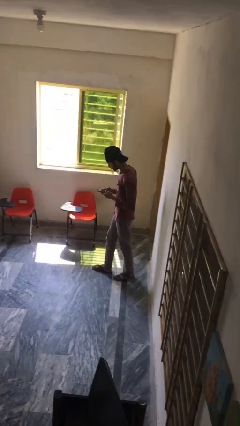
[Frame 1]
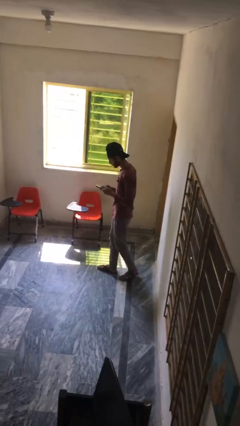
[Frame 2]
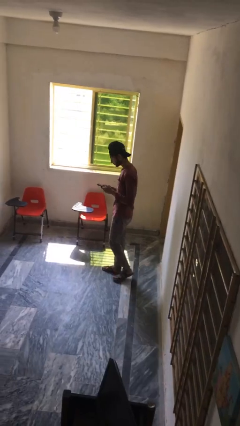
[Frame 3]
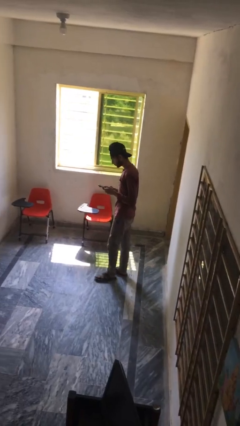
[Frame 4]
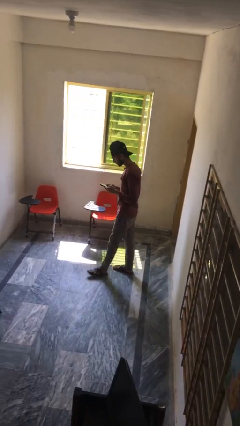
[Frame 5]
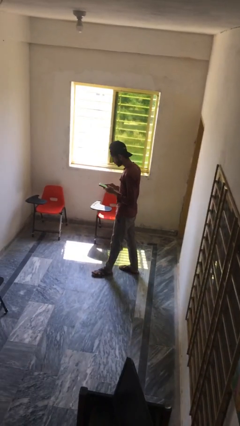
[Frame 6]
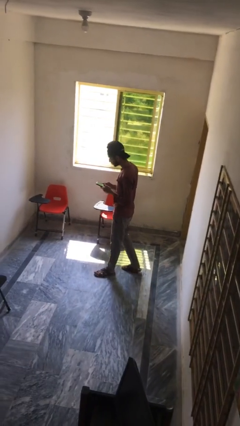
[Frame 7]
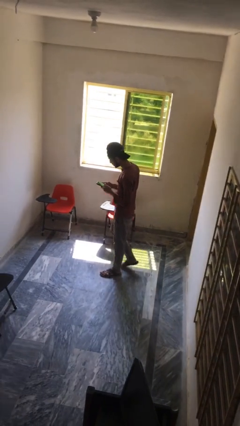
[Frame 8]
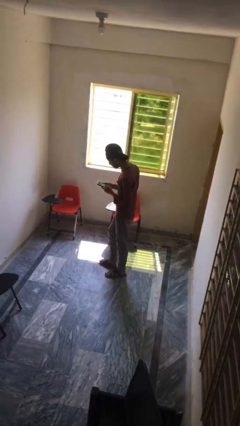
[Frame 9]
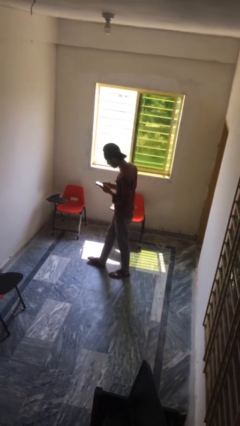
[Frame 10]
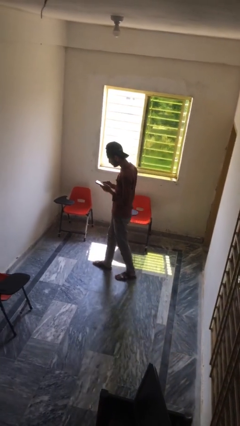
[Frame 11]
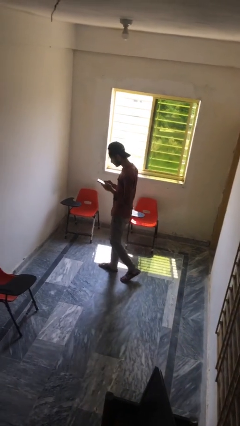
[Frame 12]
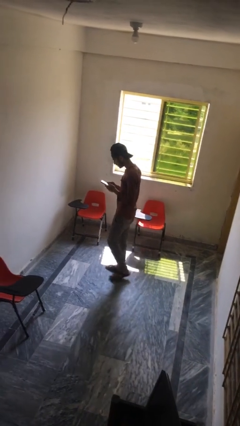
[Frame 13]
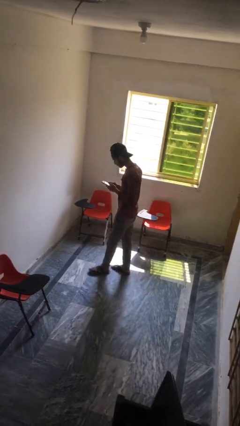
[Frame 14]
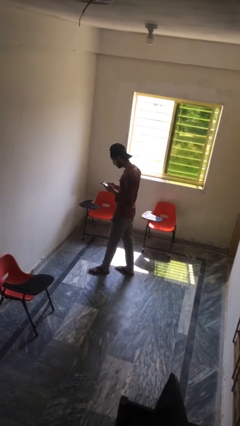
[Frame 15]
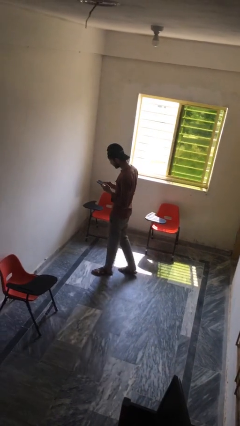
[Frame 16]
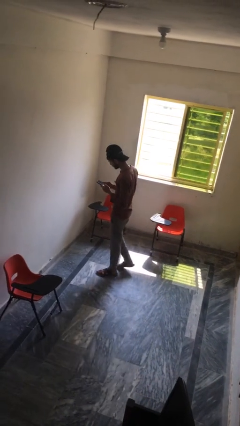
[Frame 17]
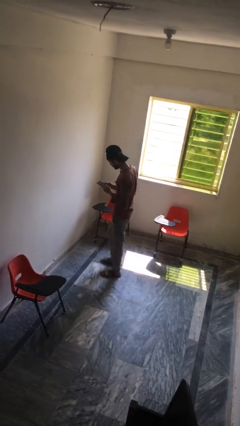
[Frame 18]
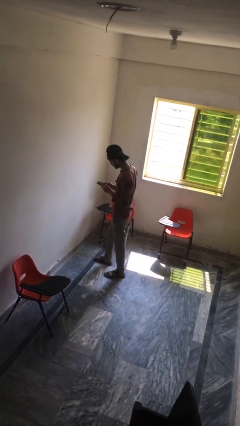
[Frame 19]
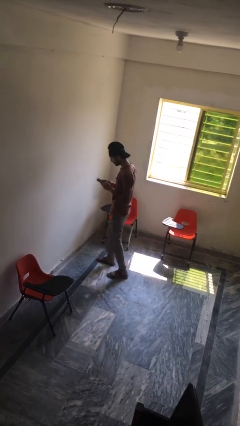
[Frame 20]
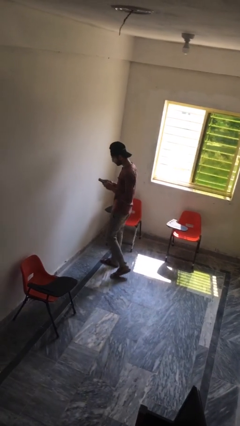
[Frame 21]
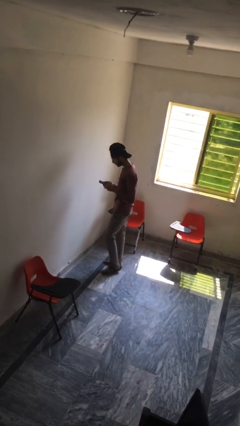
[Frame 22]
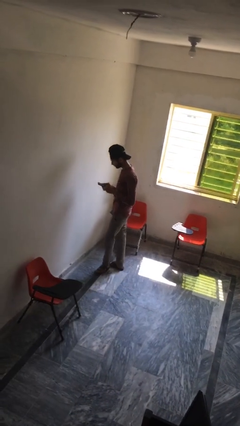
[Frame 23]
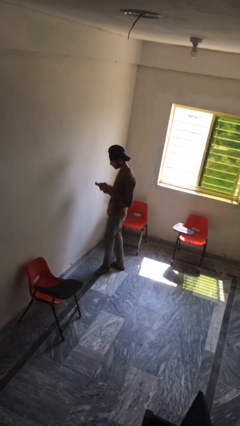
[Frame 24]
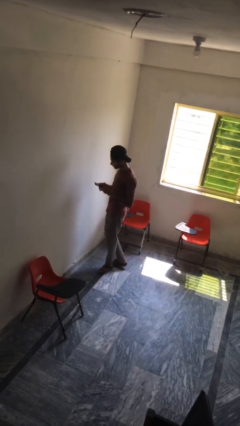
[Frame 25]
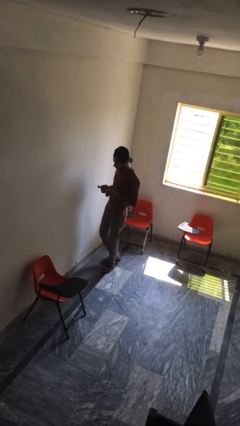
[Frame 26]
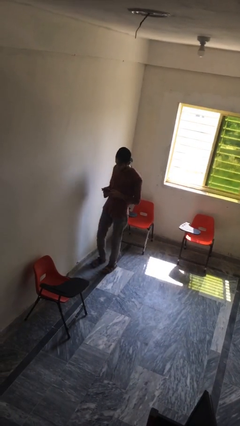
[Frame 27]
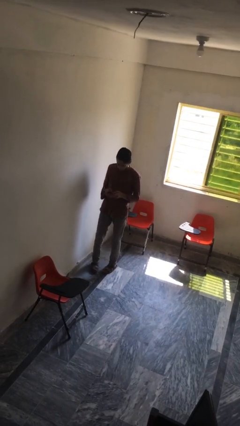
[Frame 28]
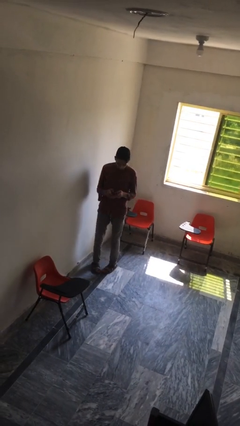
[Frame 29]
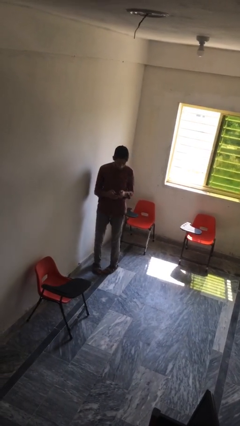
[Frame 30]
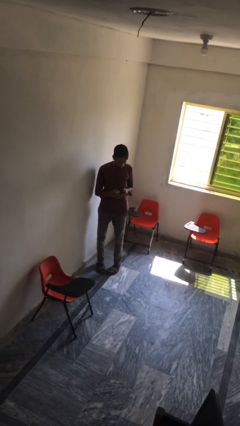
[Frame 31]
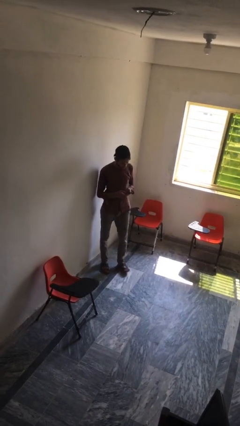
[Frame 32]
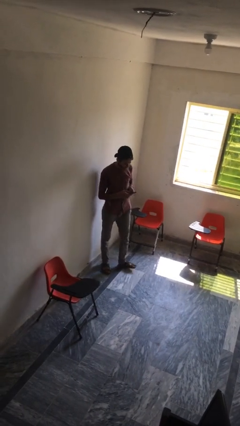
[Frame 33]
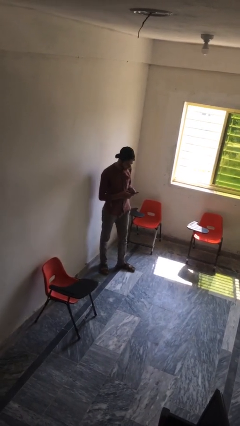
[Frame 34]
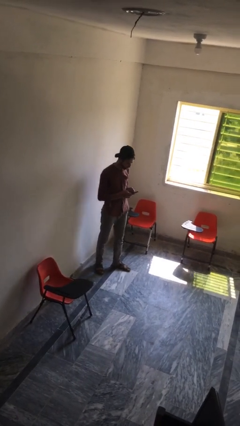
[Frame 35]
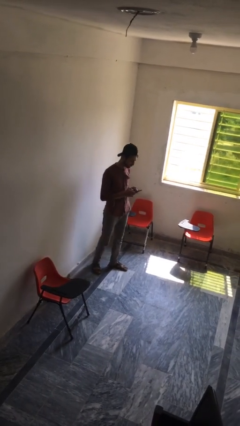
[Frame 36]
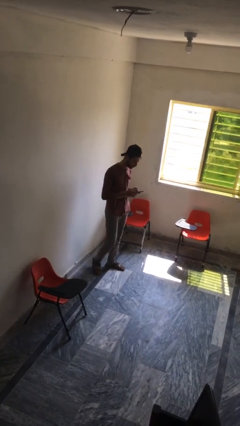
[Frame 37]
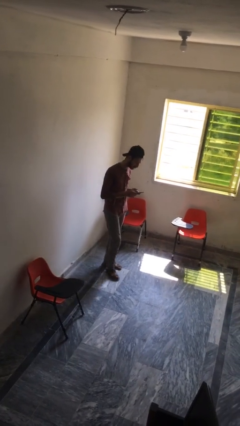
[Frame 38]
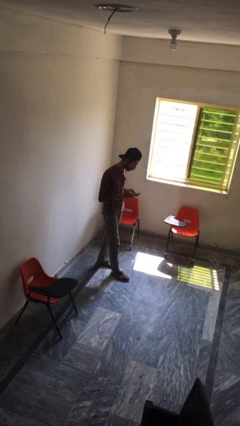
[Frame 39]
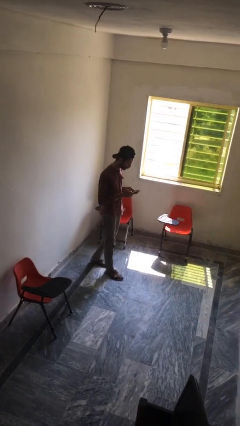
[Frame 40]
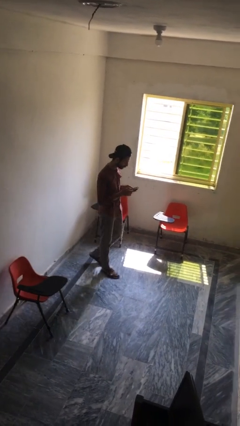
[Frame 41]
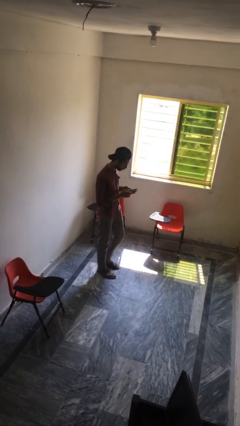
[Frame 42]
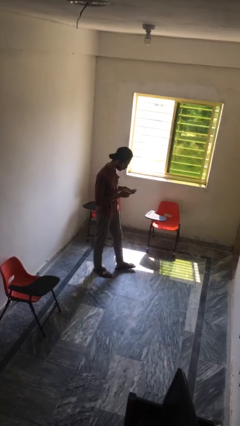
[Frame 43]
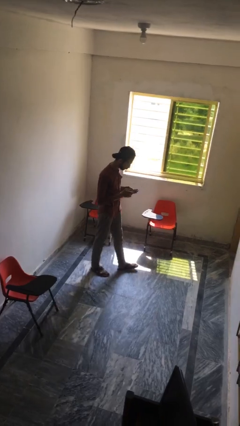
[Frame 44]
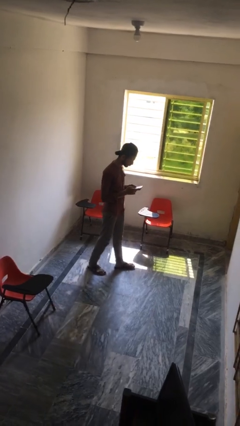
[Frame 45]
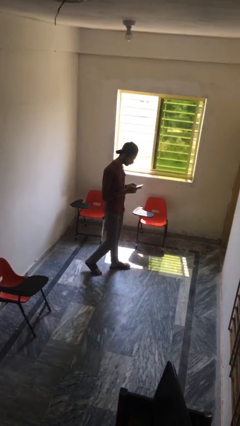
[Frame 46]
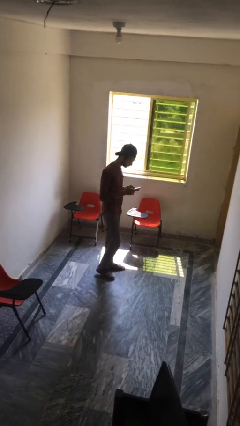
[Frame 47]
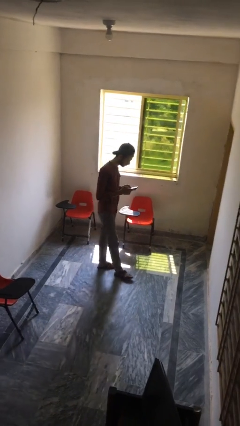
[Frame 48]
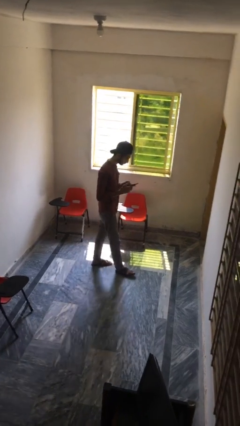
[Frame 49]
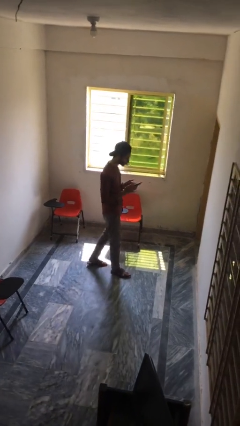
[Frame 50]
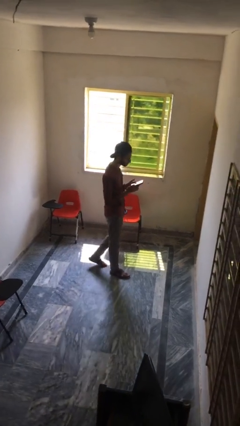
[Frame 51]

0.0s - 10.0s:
person texts on phone

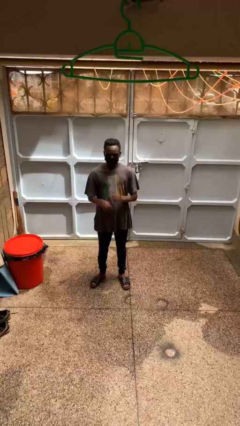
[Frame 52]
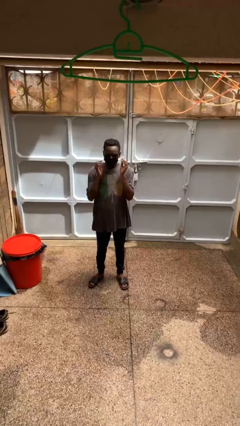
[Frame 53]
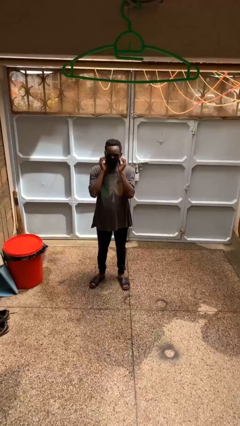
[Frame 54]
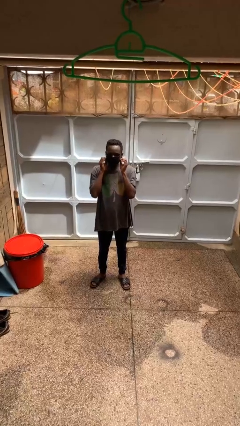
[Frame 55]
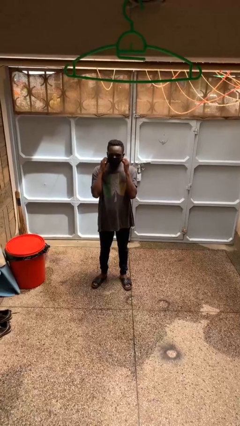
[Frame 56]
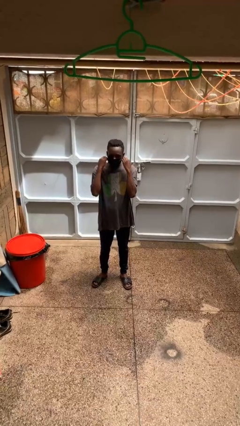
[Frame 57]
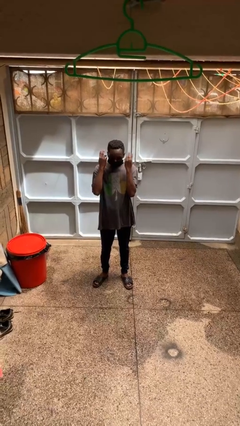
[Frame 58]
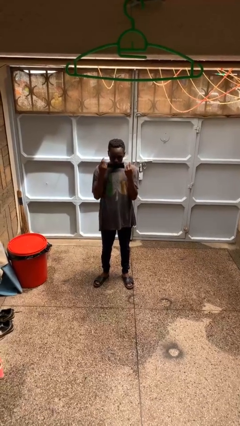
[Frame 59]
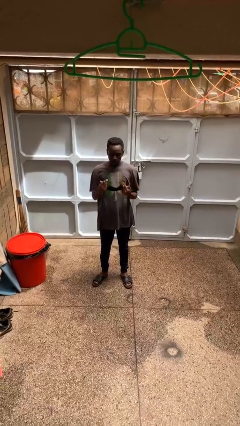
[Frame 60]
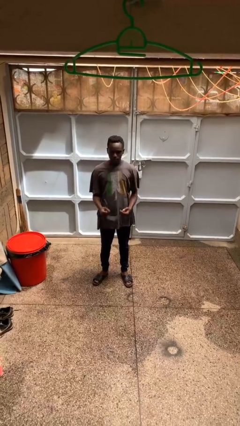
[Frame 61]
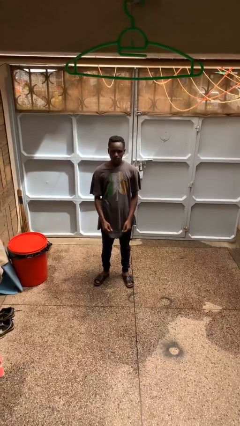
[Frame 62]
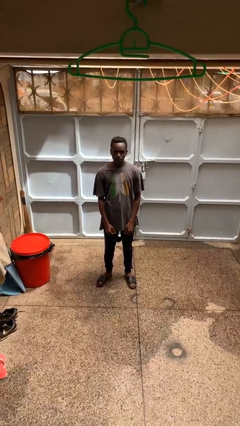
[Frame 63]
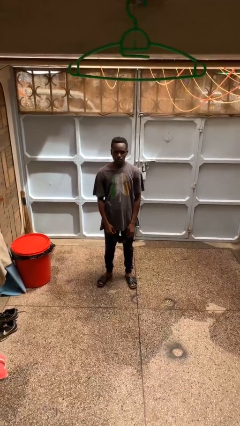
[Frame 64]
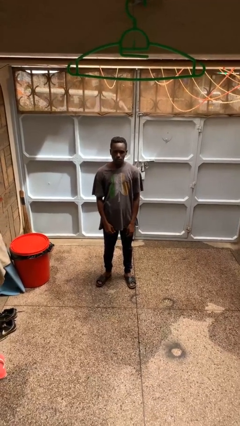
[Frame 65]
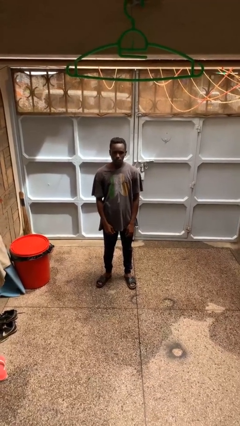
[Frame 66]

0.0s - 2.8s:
person takes off facemask

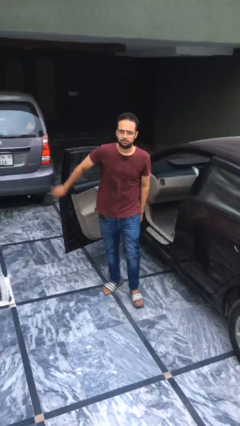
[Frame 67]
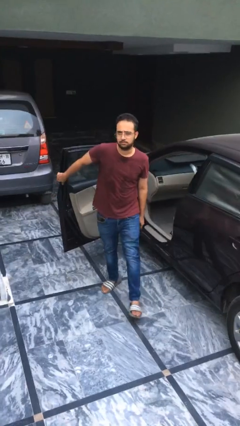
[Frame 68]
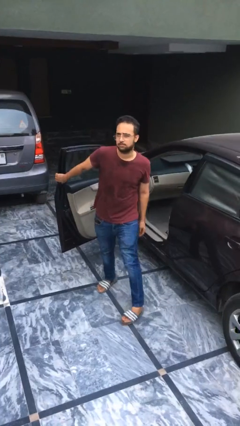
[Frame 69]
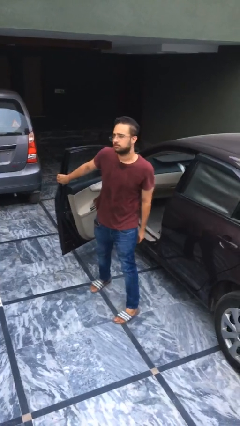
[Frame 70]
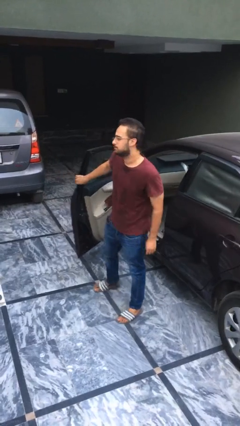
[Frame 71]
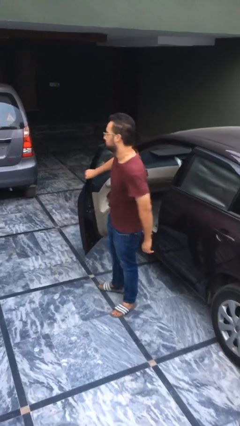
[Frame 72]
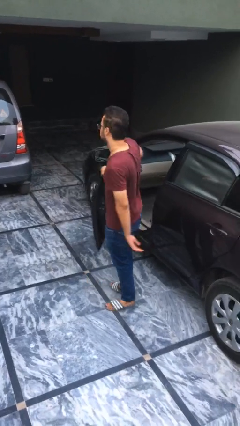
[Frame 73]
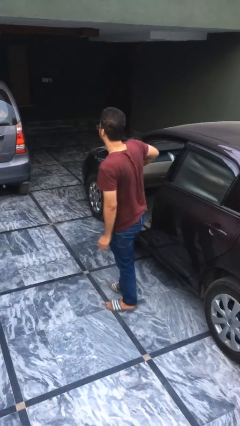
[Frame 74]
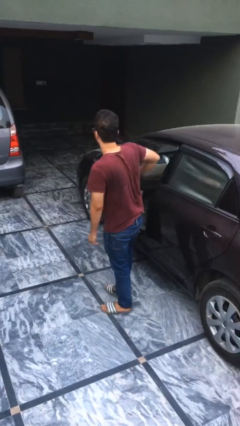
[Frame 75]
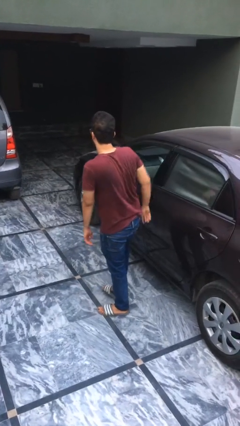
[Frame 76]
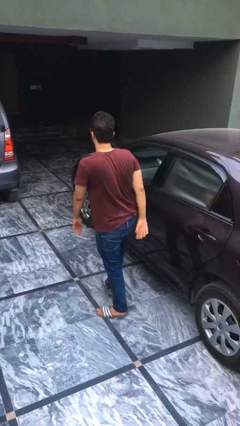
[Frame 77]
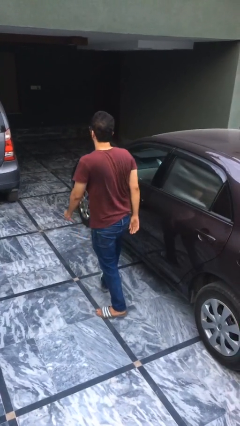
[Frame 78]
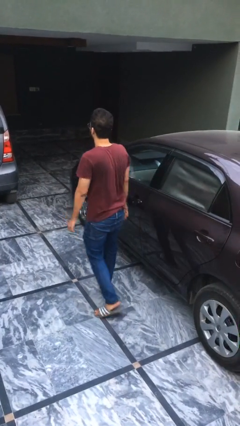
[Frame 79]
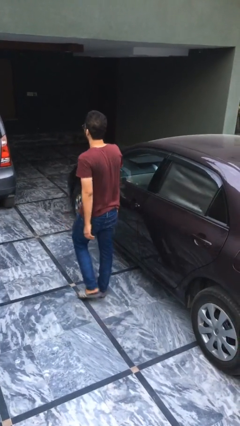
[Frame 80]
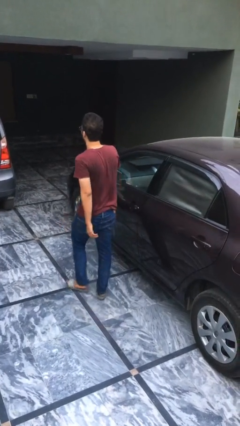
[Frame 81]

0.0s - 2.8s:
person closes car door

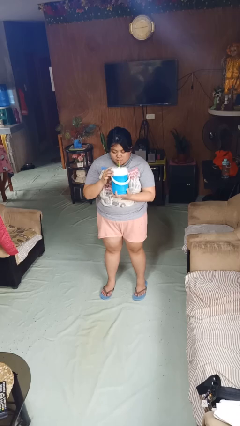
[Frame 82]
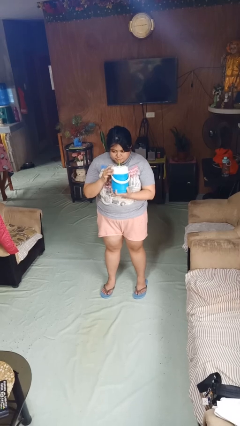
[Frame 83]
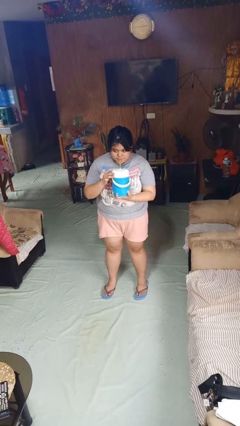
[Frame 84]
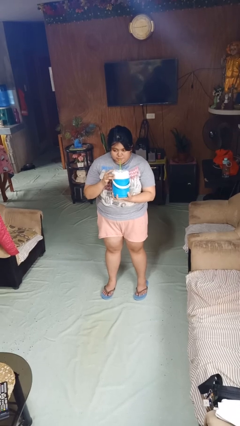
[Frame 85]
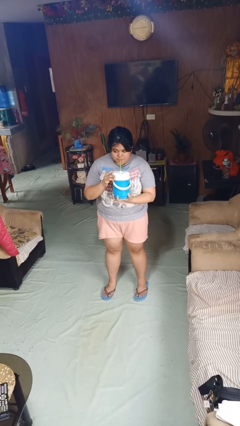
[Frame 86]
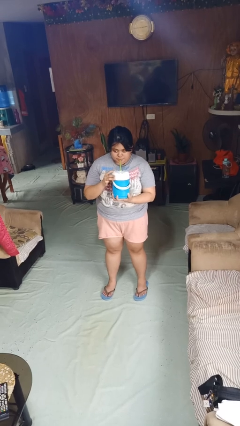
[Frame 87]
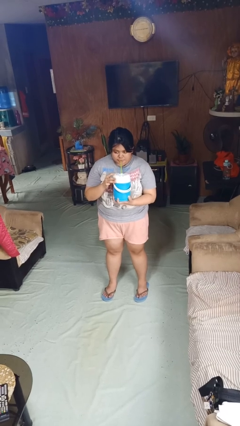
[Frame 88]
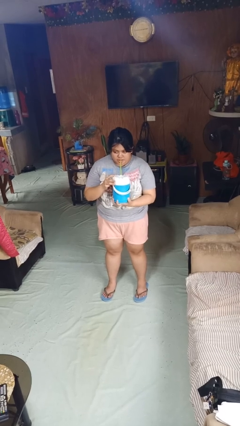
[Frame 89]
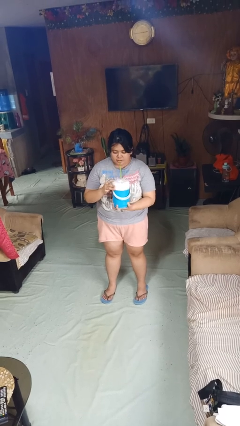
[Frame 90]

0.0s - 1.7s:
person drinks from straw

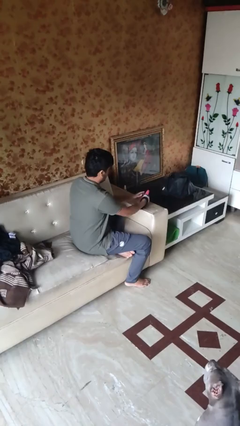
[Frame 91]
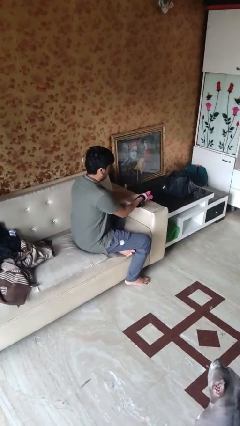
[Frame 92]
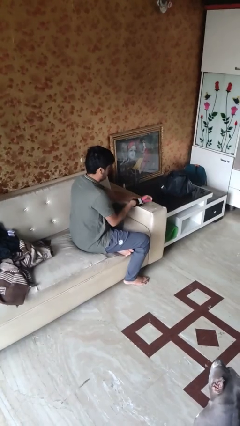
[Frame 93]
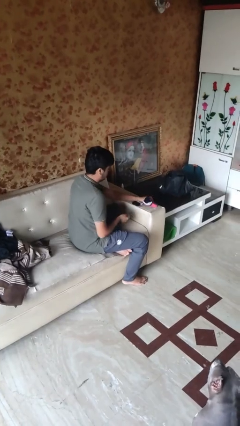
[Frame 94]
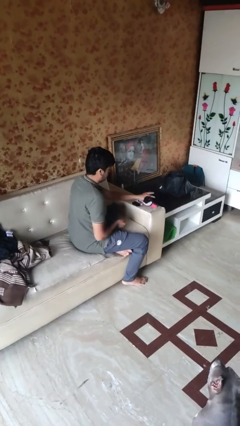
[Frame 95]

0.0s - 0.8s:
person takes off gloves
